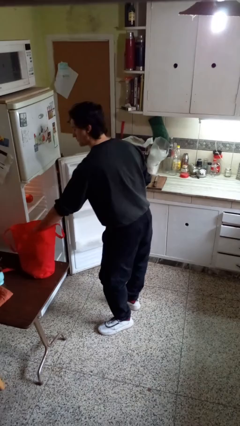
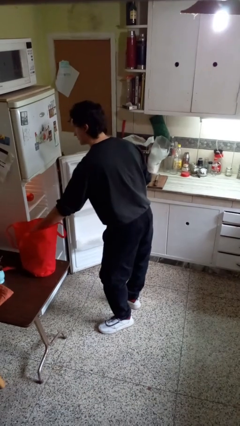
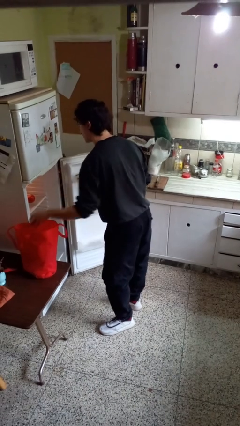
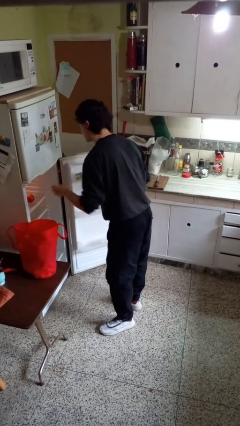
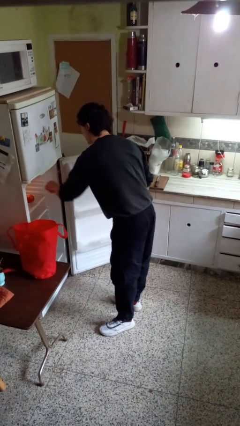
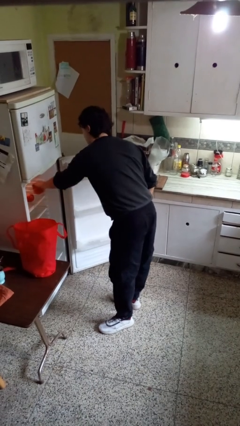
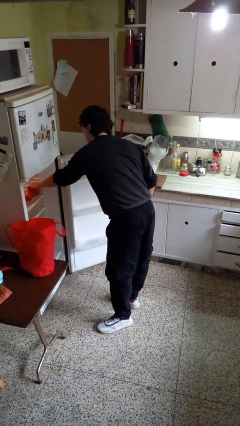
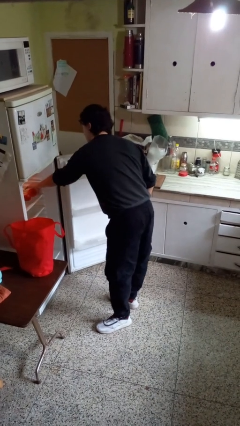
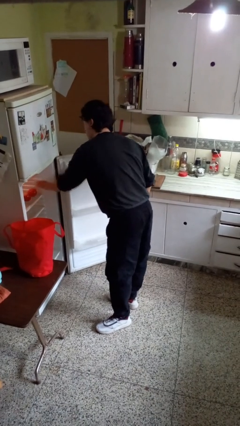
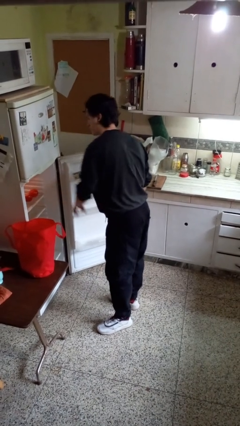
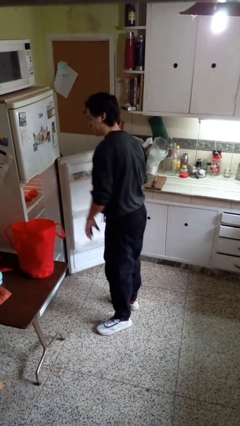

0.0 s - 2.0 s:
person loads groceries into refrigerator

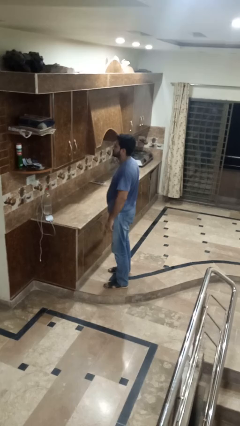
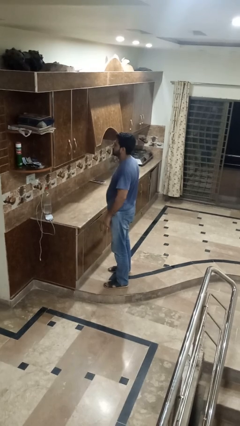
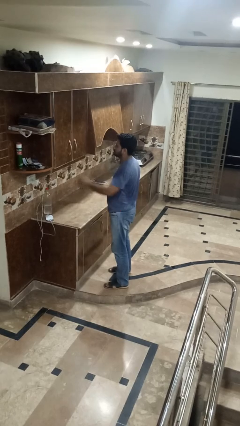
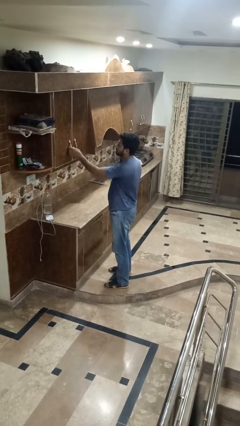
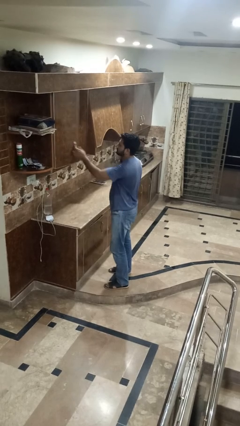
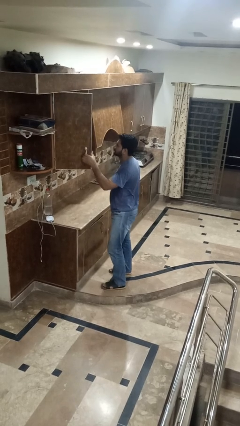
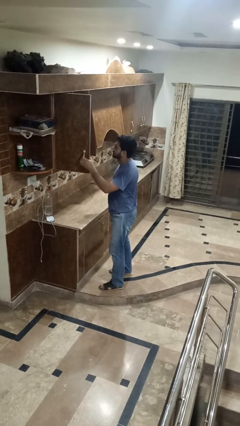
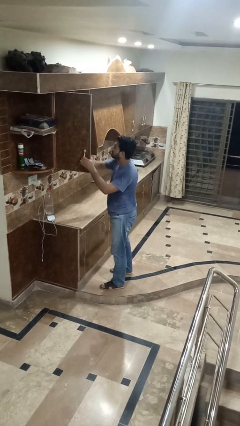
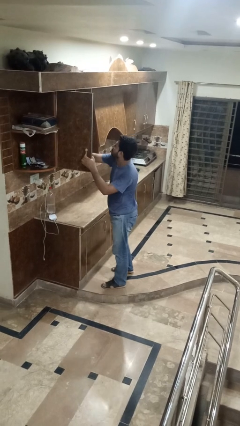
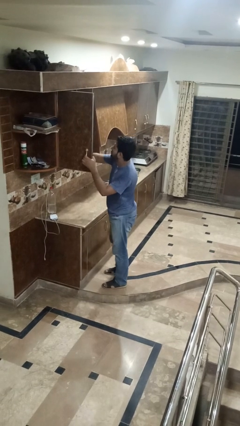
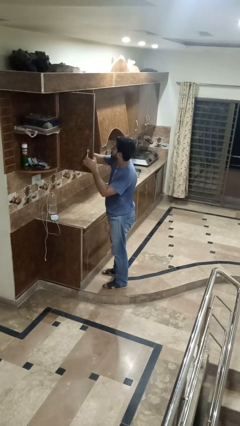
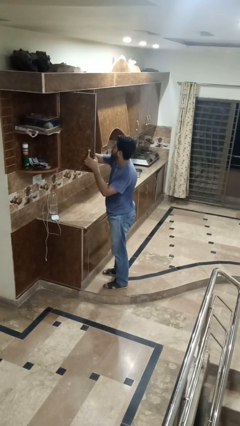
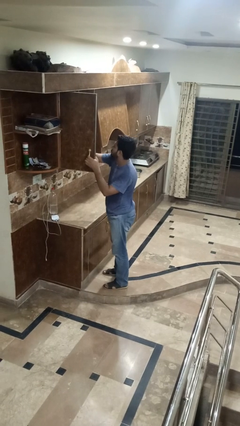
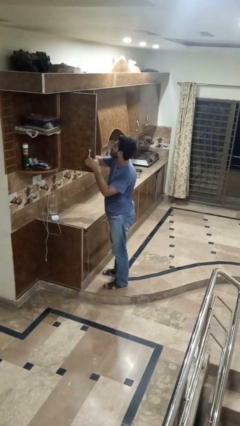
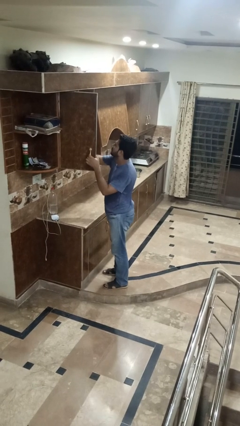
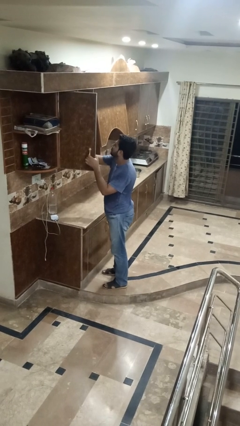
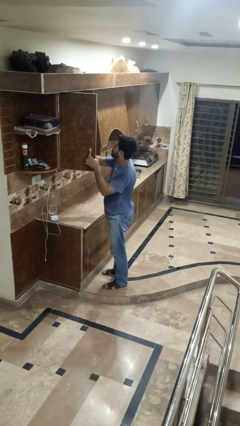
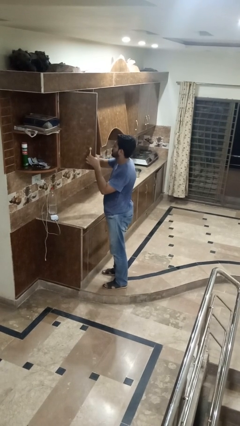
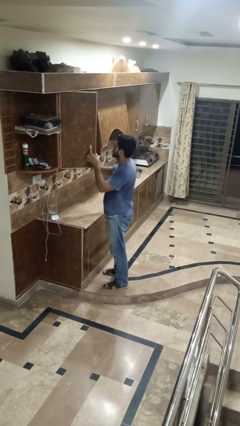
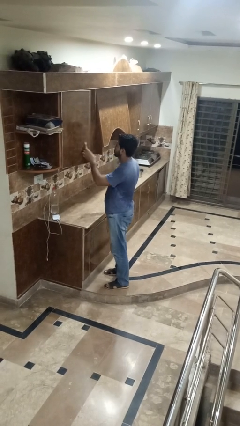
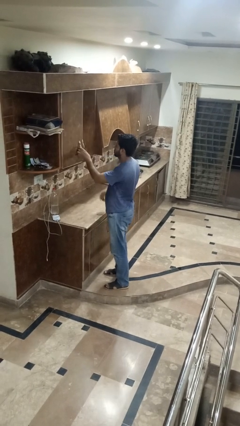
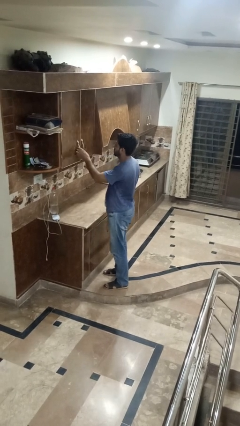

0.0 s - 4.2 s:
person searches in cabinet

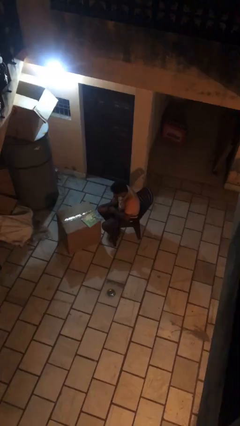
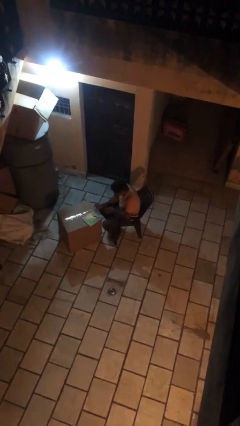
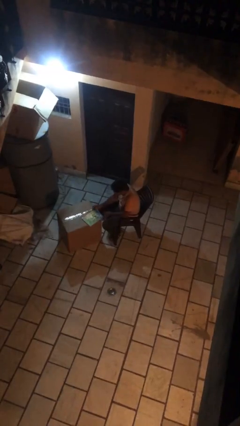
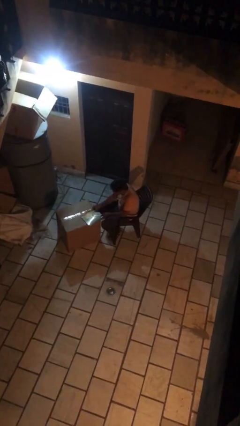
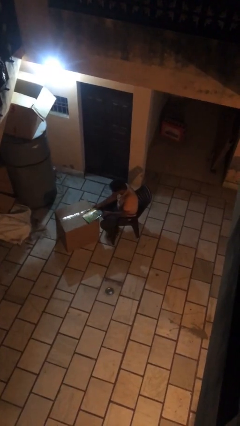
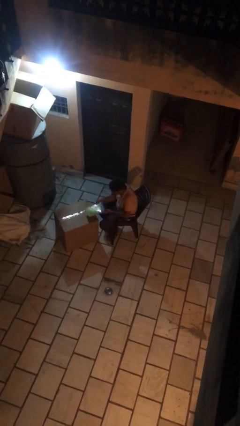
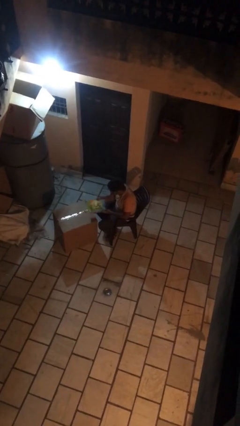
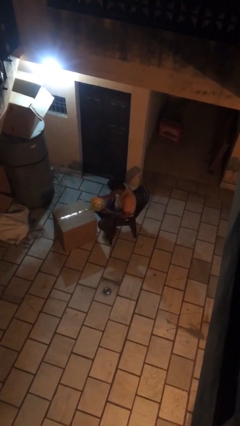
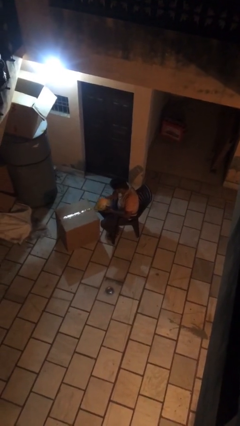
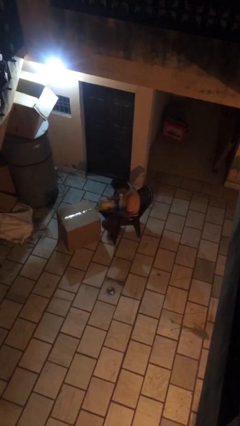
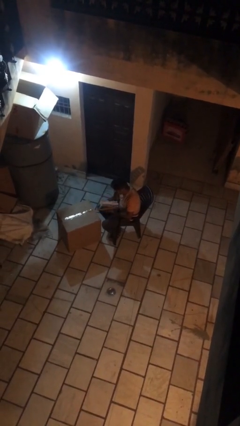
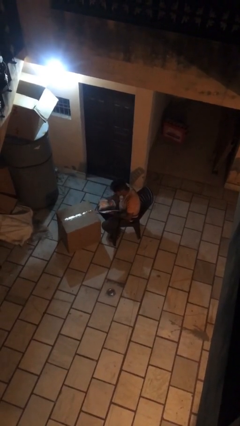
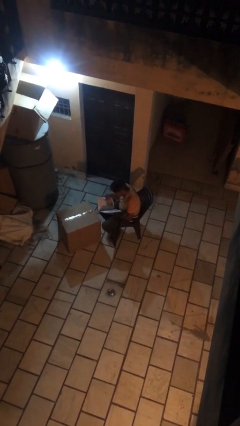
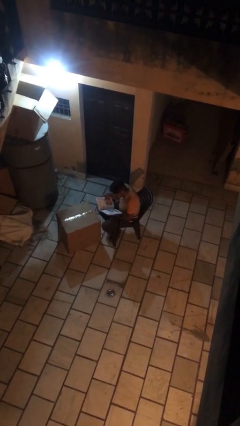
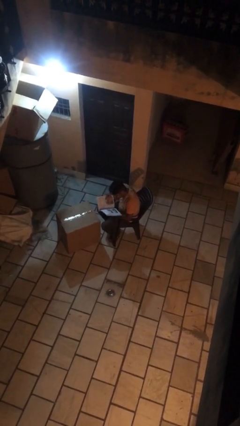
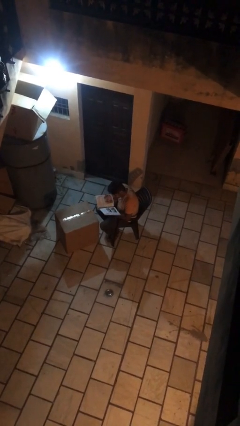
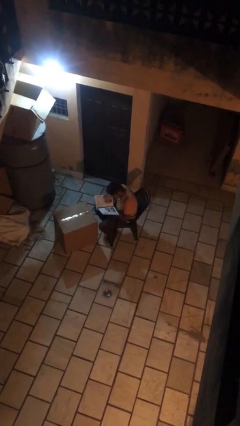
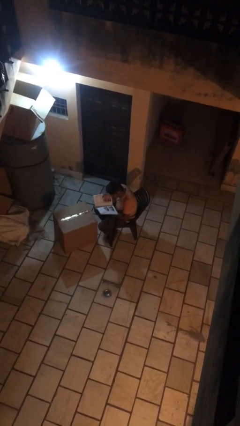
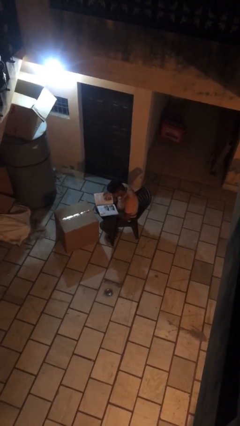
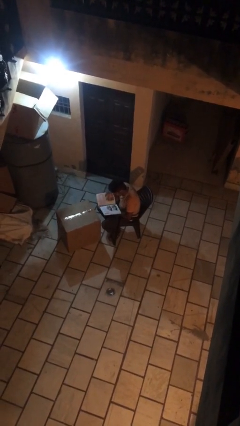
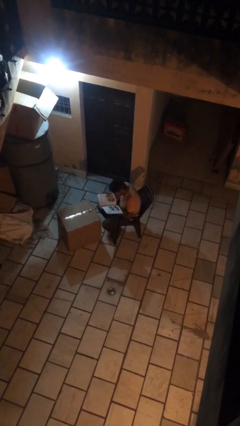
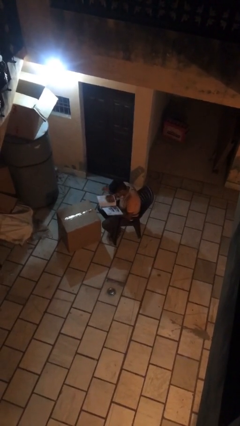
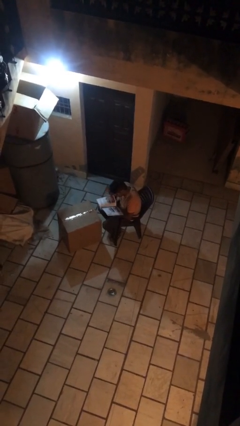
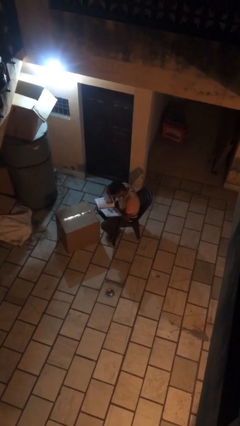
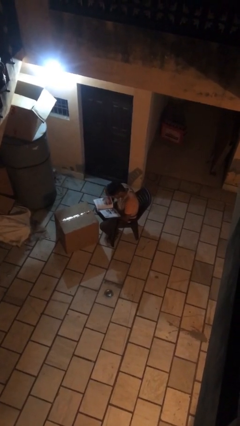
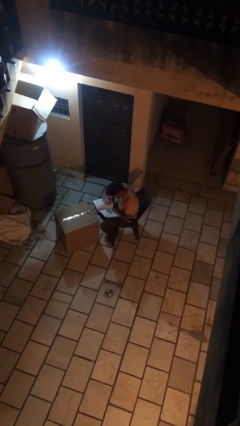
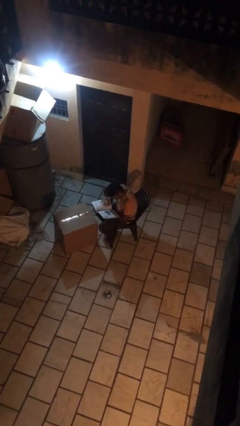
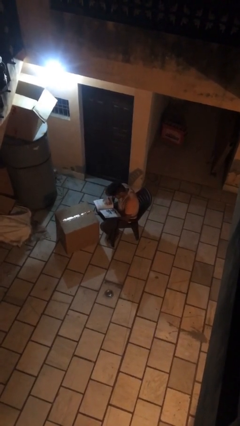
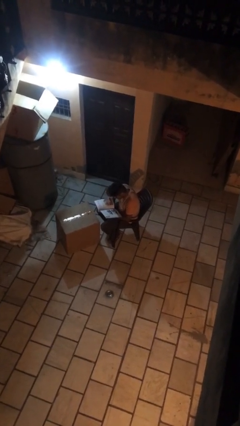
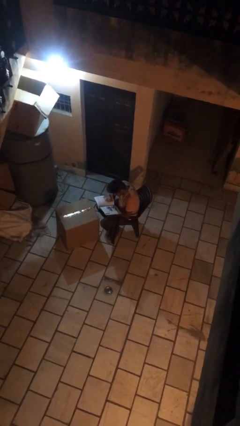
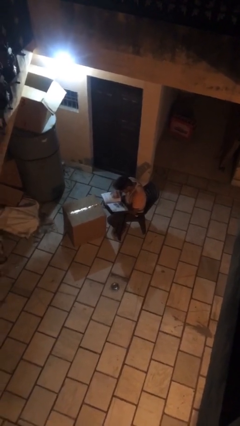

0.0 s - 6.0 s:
person reads document

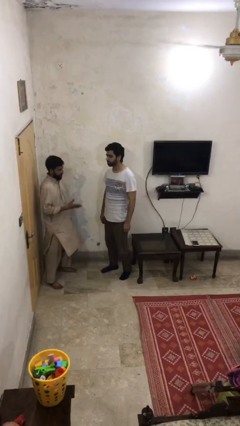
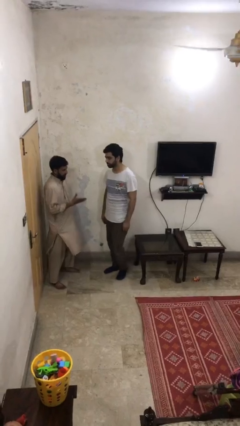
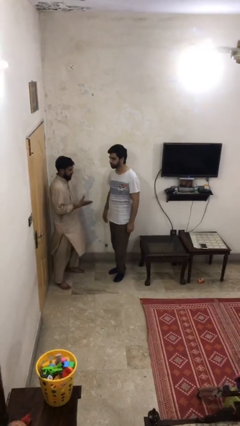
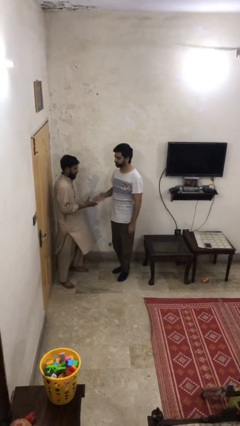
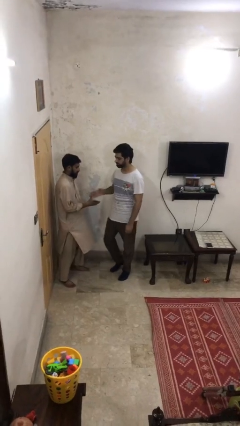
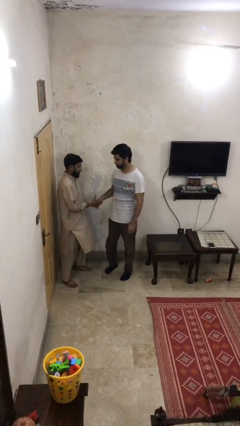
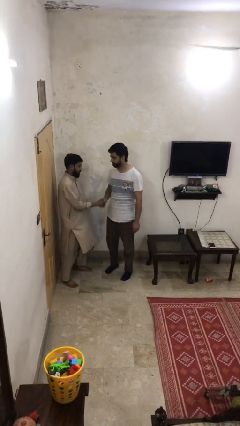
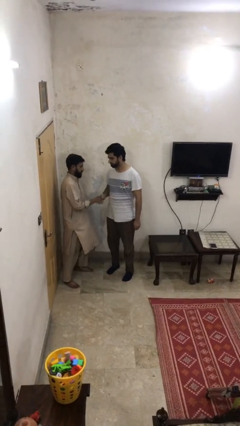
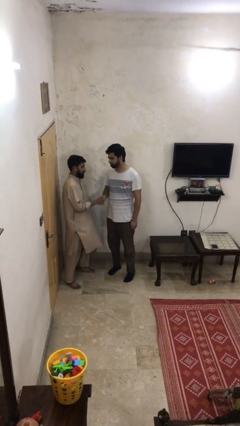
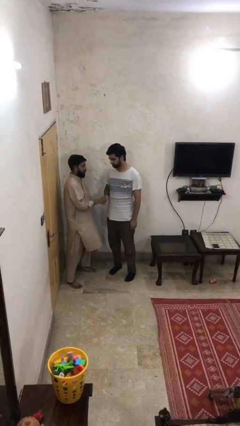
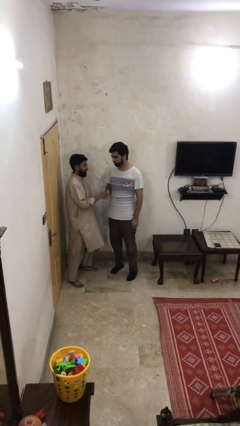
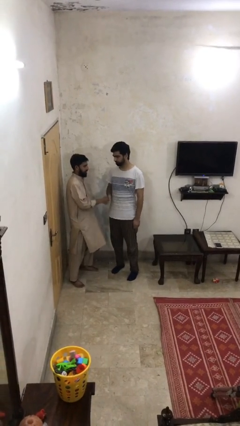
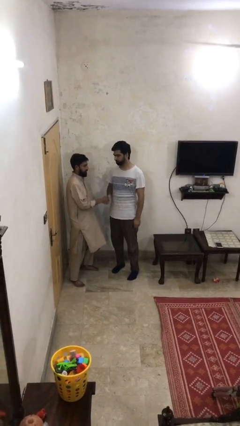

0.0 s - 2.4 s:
person shakes hand

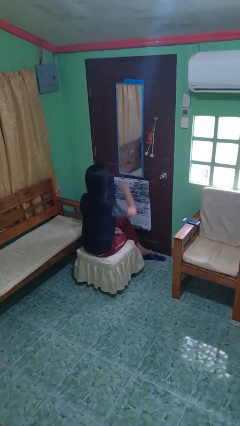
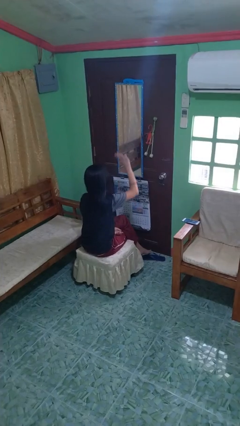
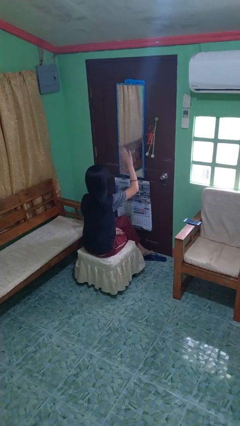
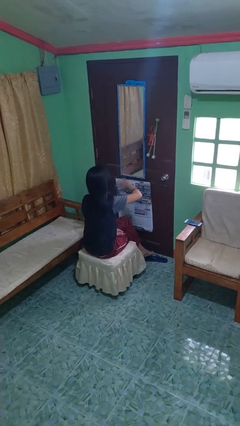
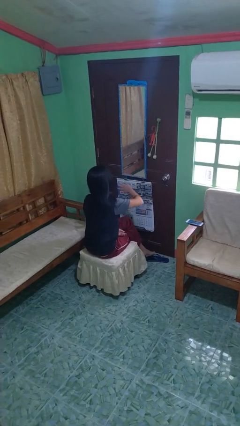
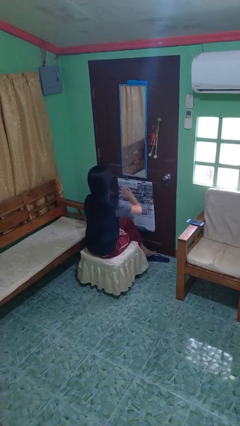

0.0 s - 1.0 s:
person gestures swipe up

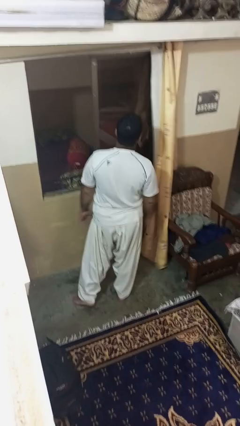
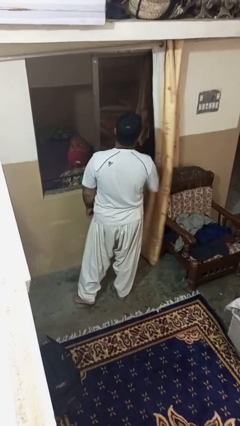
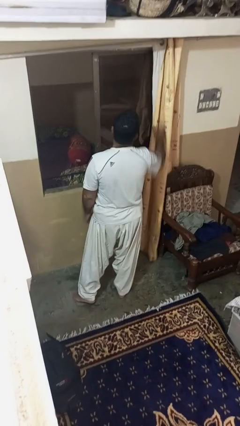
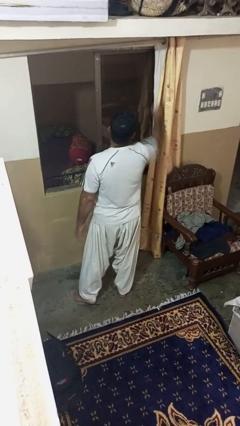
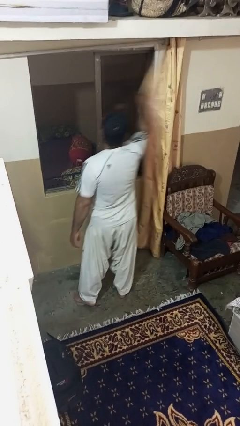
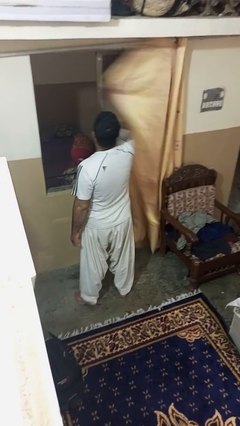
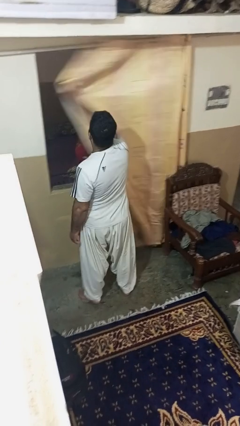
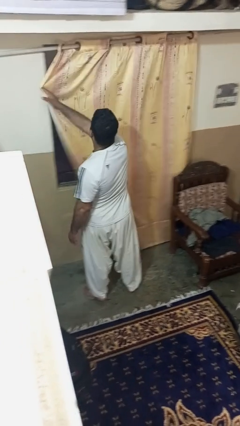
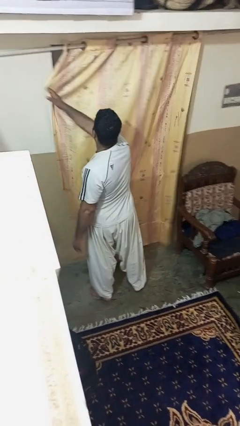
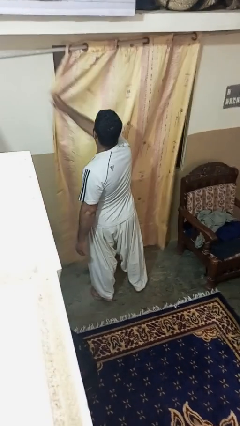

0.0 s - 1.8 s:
person closes curtains

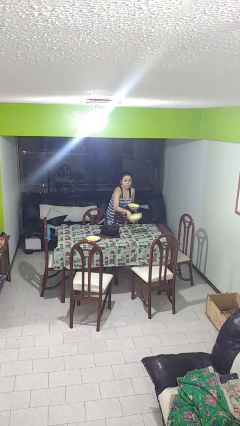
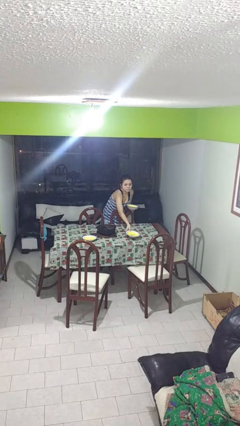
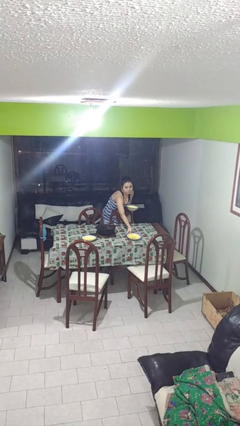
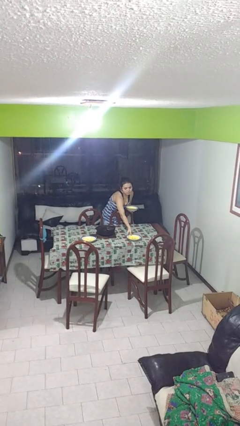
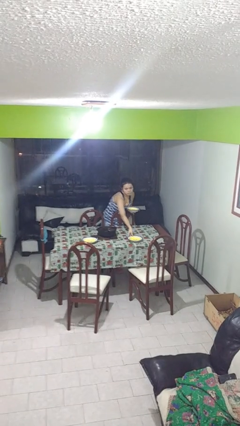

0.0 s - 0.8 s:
person sets table
